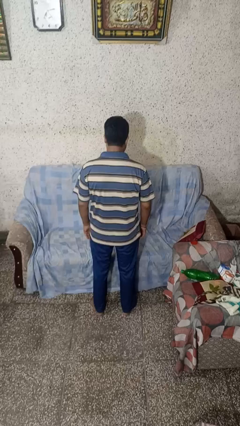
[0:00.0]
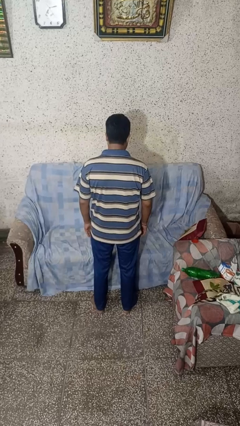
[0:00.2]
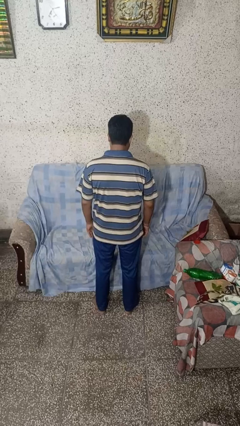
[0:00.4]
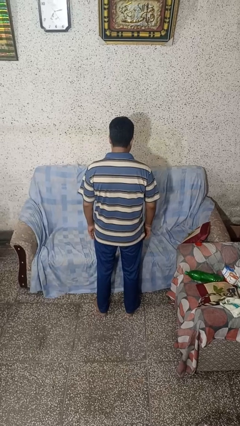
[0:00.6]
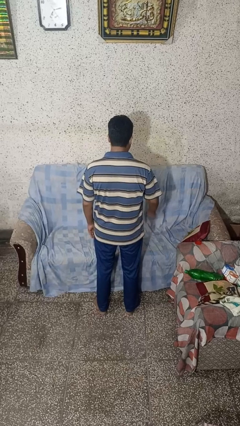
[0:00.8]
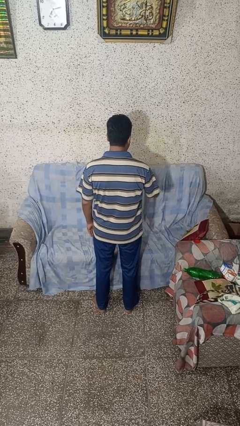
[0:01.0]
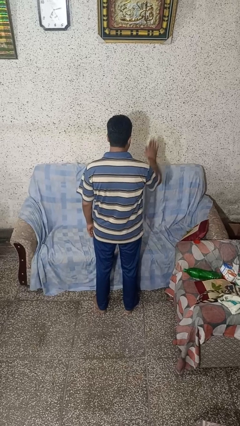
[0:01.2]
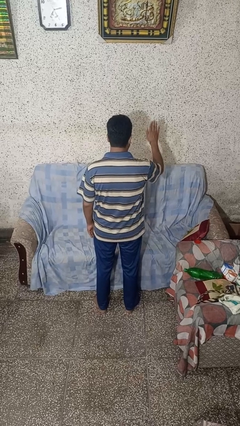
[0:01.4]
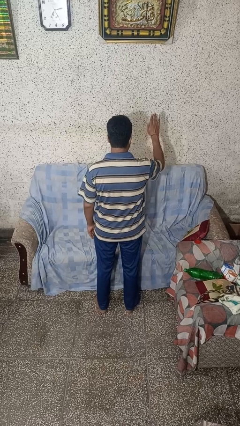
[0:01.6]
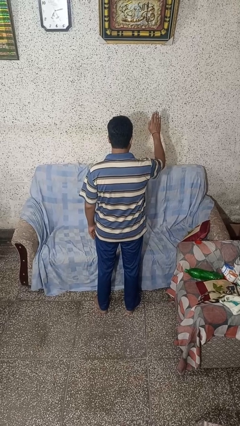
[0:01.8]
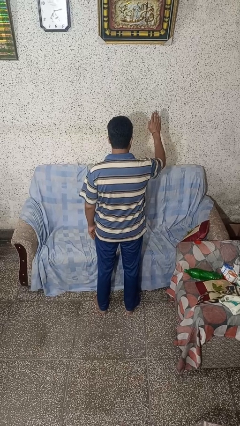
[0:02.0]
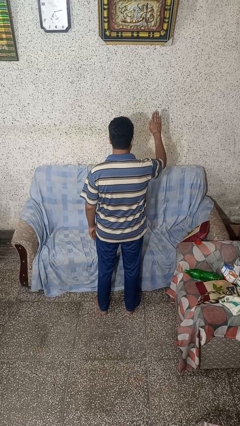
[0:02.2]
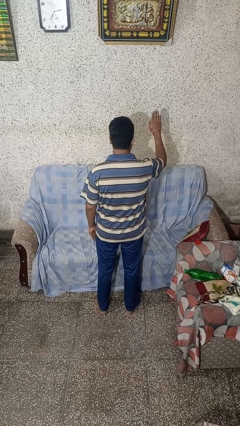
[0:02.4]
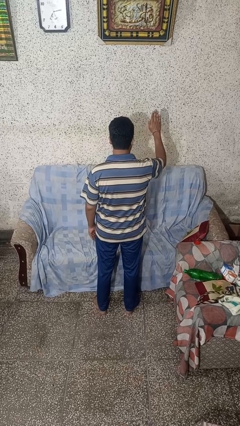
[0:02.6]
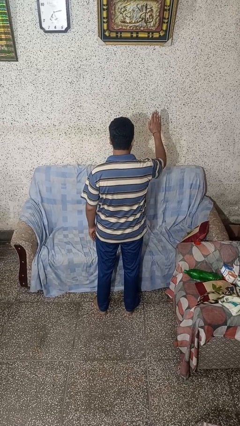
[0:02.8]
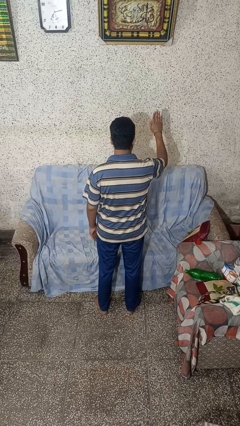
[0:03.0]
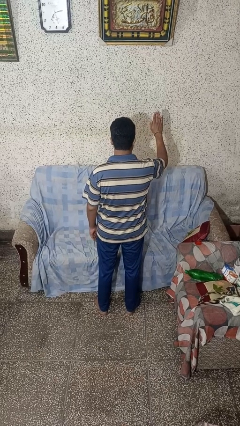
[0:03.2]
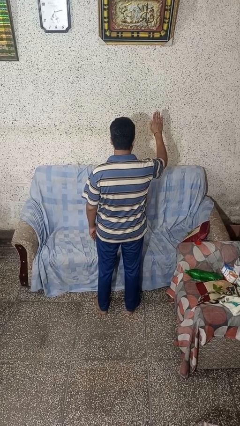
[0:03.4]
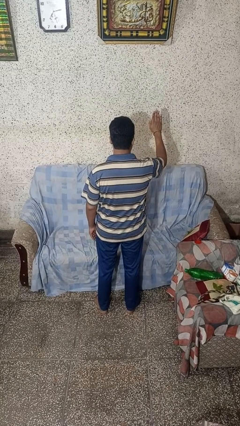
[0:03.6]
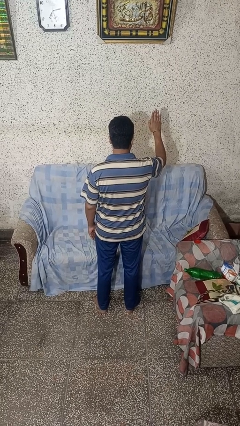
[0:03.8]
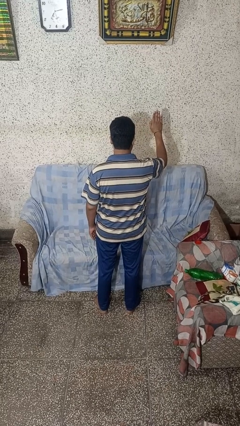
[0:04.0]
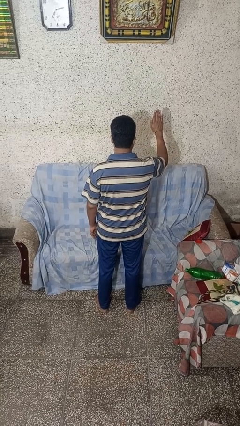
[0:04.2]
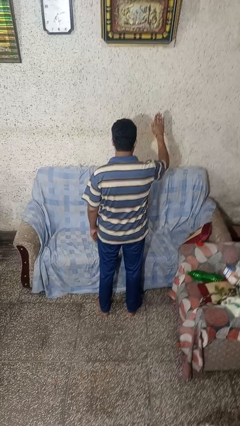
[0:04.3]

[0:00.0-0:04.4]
person gestures stop

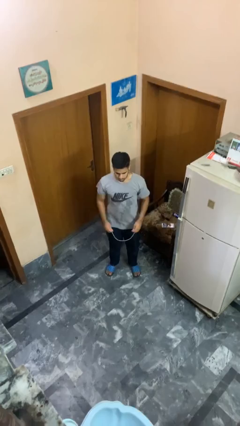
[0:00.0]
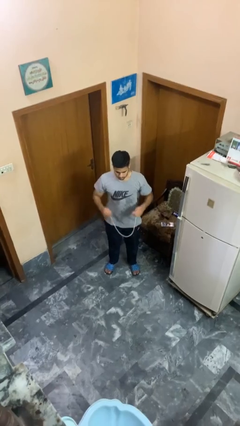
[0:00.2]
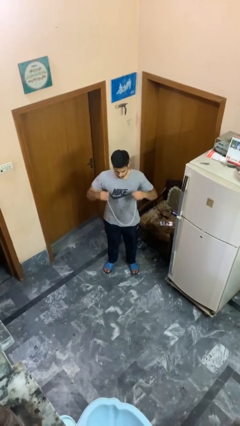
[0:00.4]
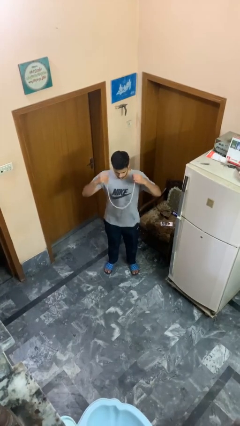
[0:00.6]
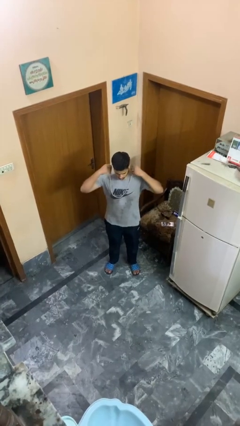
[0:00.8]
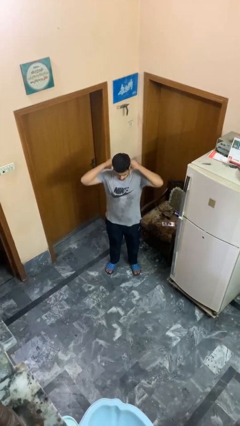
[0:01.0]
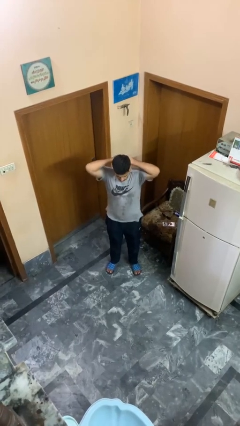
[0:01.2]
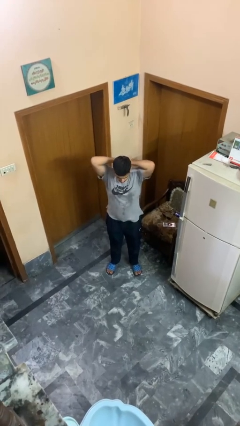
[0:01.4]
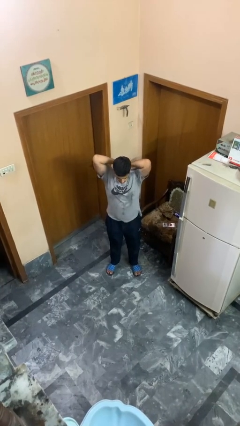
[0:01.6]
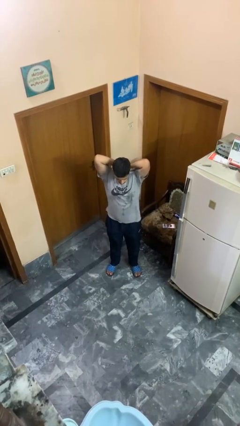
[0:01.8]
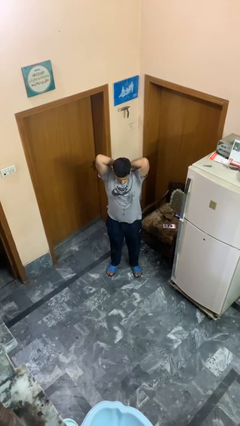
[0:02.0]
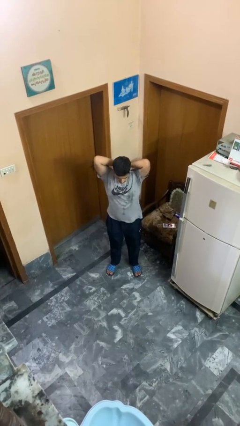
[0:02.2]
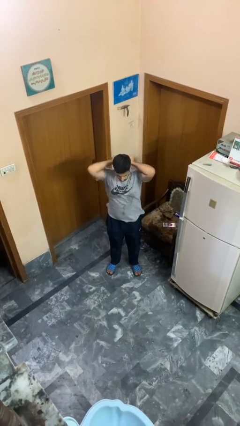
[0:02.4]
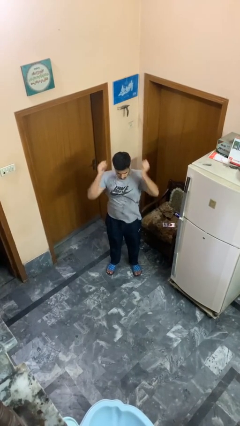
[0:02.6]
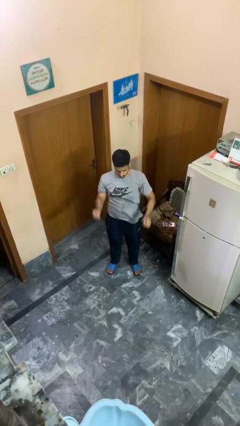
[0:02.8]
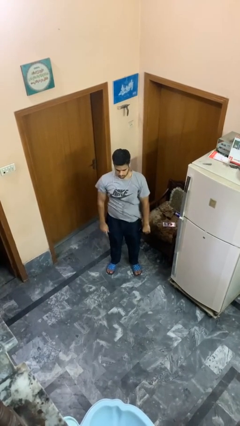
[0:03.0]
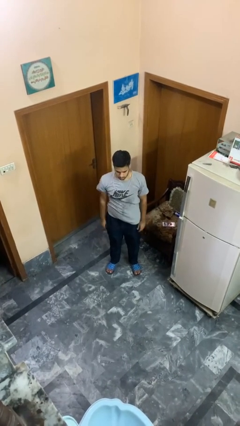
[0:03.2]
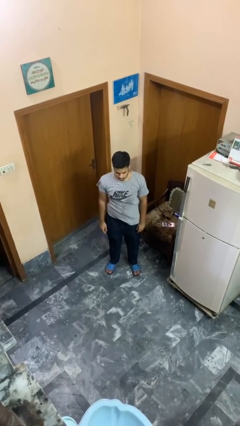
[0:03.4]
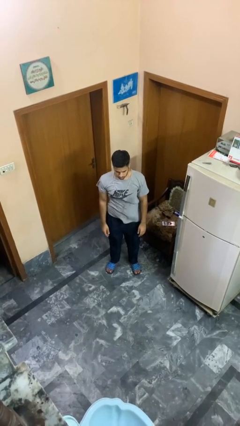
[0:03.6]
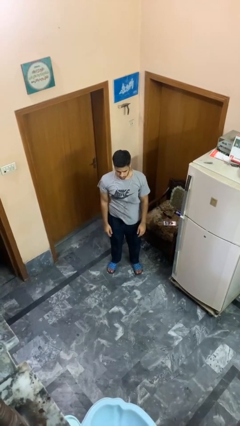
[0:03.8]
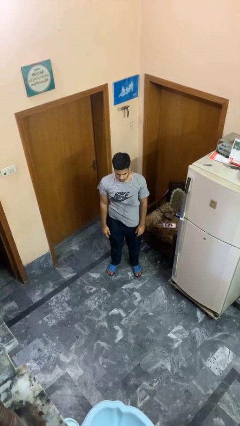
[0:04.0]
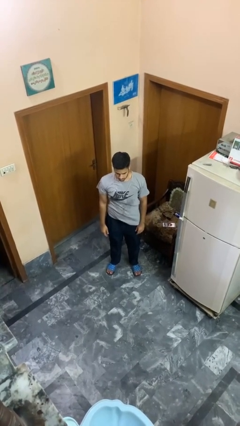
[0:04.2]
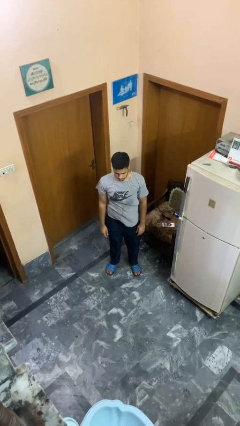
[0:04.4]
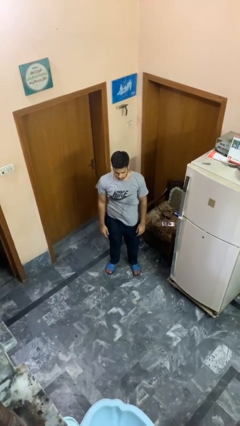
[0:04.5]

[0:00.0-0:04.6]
person puts on necklace

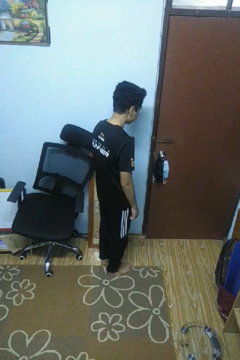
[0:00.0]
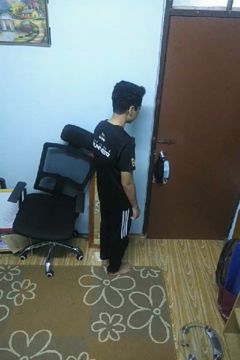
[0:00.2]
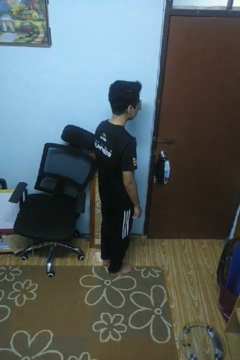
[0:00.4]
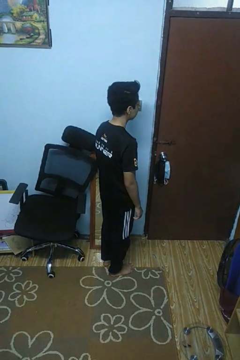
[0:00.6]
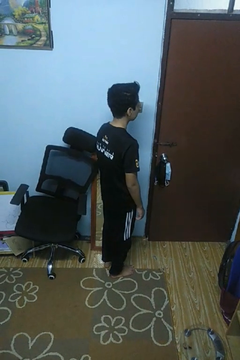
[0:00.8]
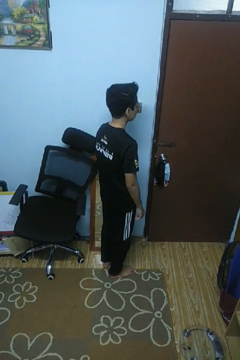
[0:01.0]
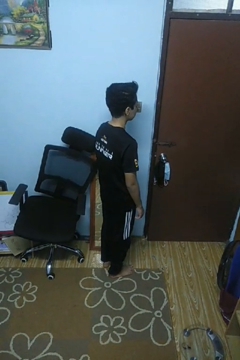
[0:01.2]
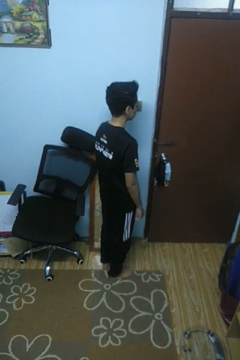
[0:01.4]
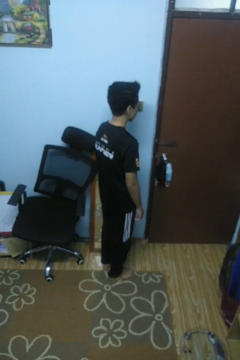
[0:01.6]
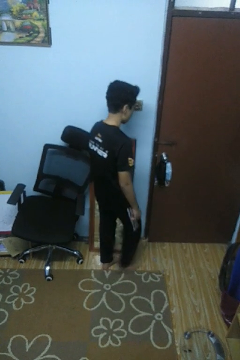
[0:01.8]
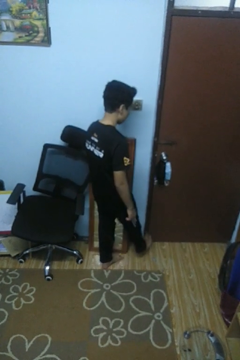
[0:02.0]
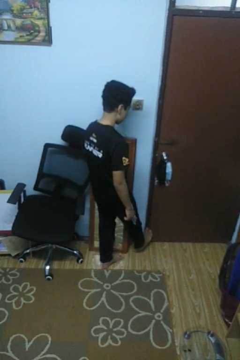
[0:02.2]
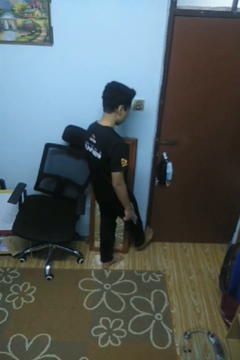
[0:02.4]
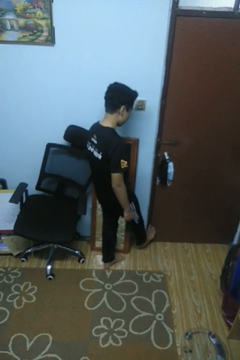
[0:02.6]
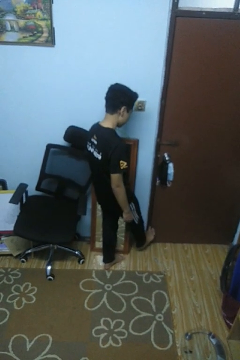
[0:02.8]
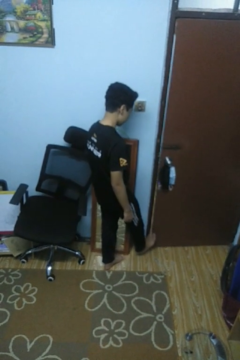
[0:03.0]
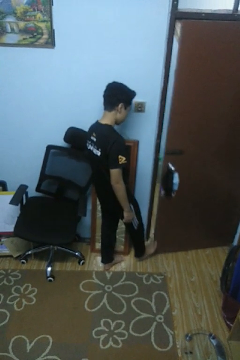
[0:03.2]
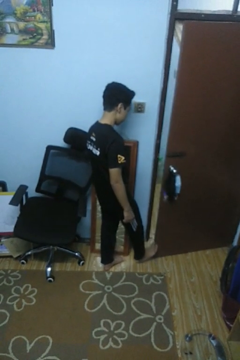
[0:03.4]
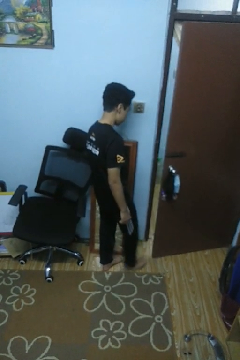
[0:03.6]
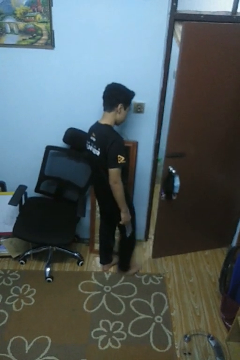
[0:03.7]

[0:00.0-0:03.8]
person opens facility door

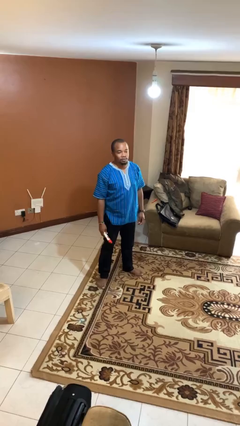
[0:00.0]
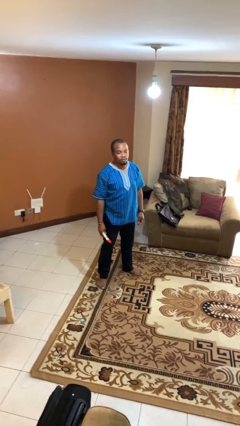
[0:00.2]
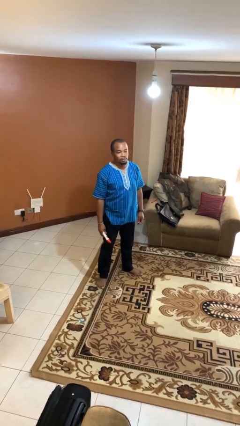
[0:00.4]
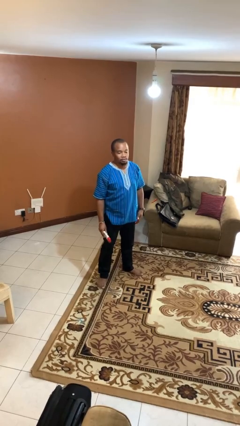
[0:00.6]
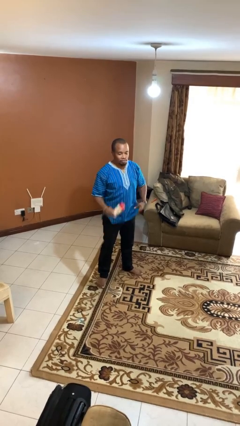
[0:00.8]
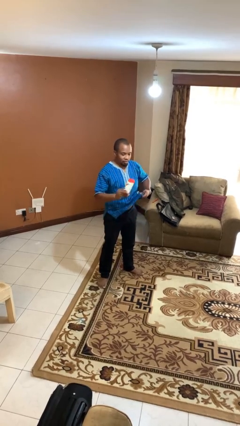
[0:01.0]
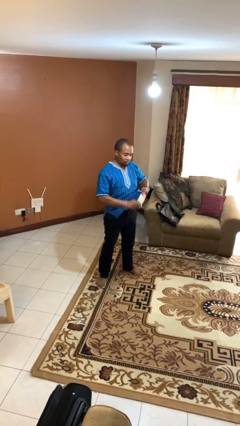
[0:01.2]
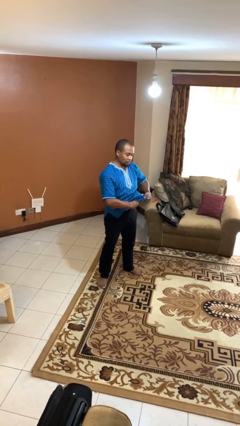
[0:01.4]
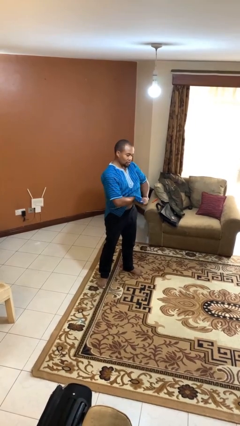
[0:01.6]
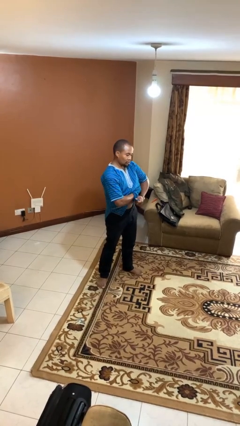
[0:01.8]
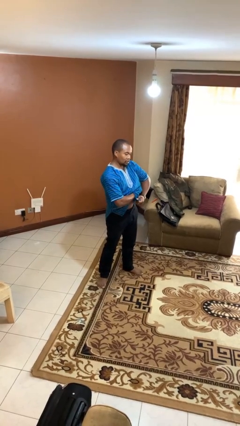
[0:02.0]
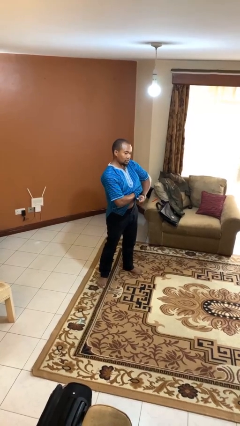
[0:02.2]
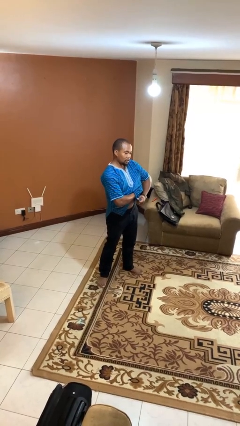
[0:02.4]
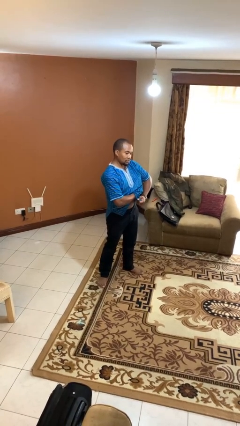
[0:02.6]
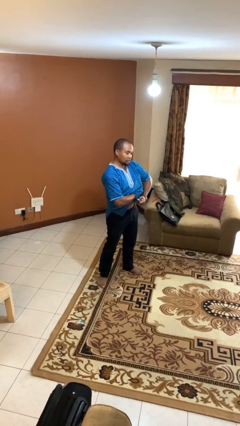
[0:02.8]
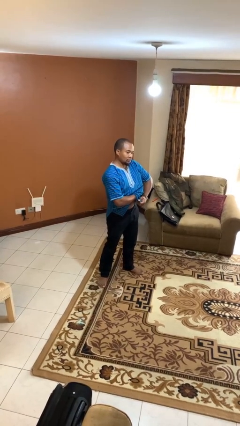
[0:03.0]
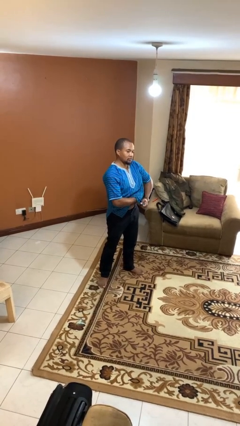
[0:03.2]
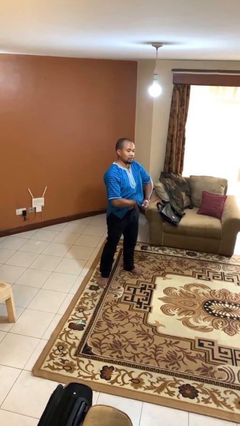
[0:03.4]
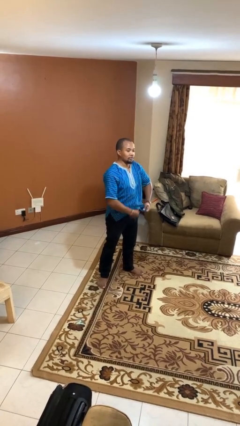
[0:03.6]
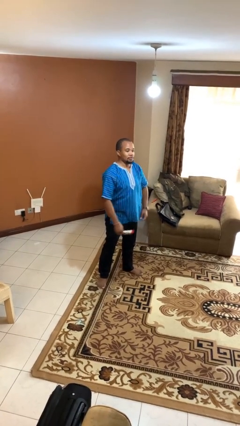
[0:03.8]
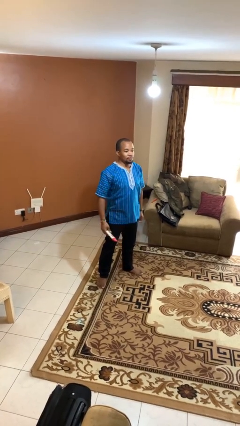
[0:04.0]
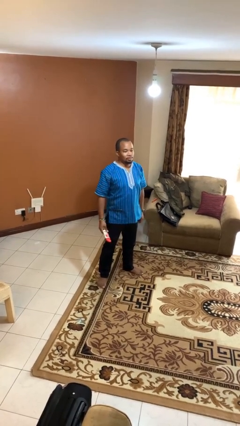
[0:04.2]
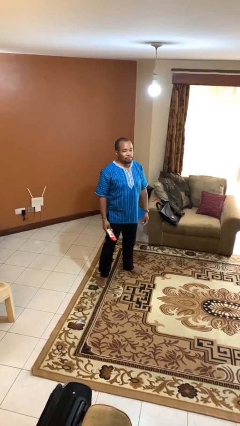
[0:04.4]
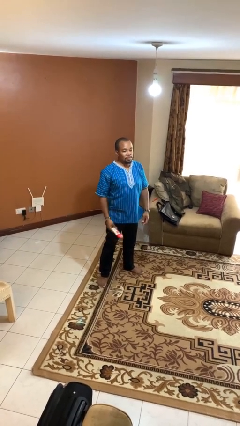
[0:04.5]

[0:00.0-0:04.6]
person applies deodorant

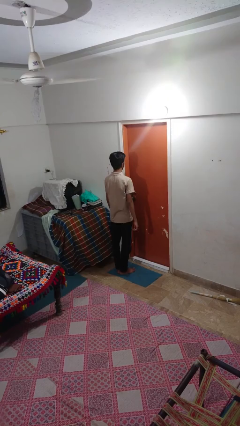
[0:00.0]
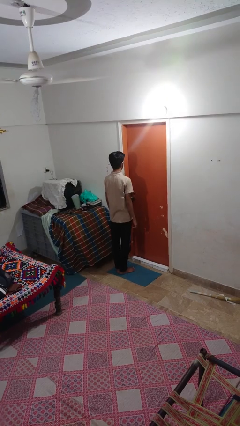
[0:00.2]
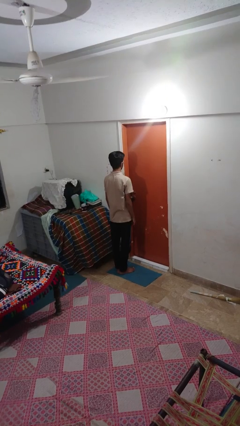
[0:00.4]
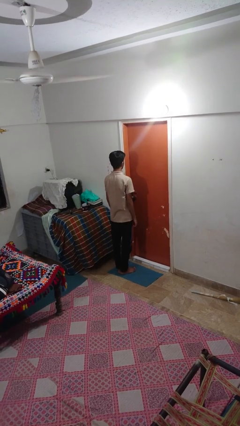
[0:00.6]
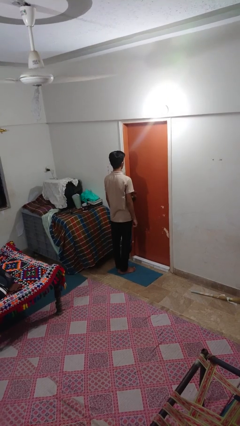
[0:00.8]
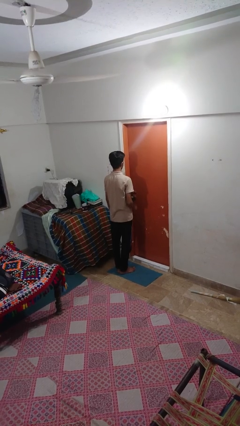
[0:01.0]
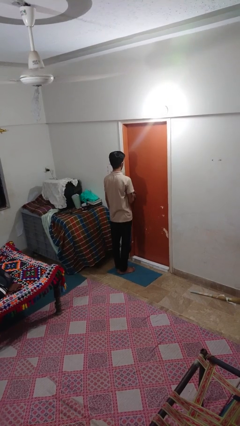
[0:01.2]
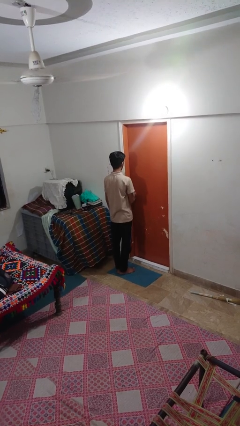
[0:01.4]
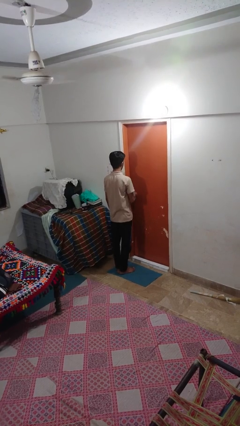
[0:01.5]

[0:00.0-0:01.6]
person unlocks door with keys
